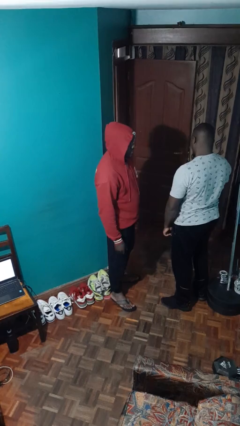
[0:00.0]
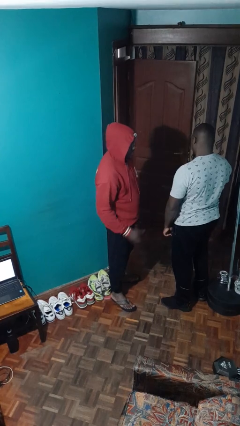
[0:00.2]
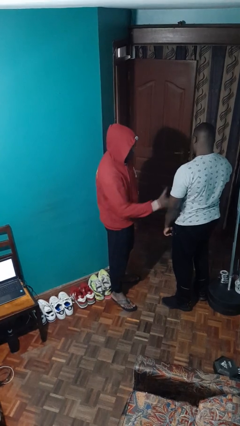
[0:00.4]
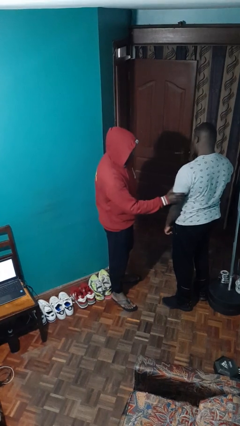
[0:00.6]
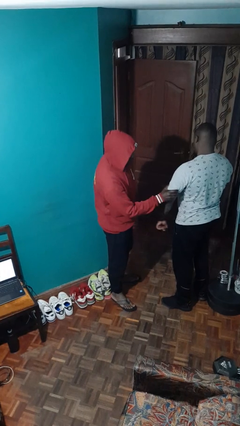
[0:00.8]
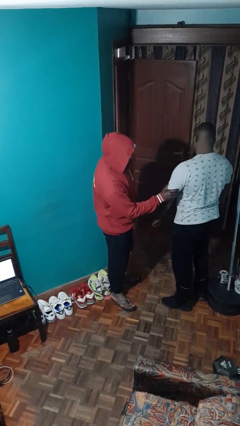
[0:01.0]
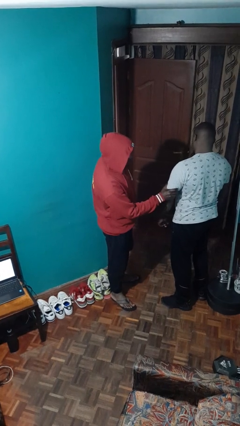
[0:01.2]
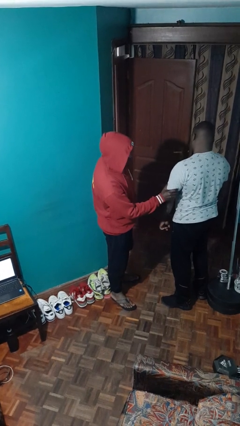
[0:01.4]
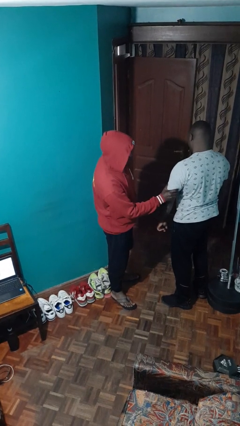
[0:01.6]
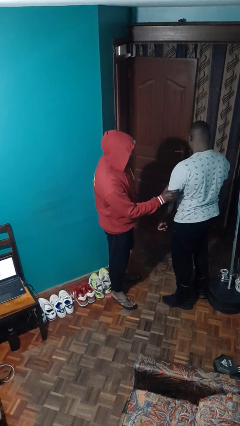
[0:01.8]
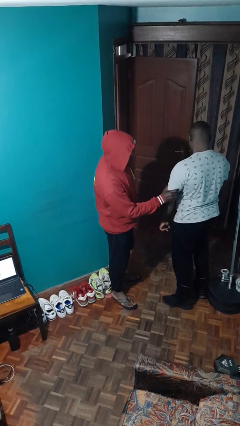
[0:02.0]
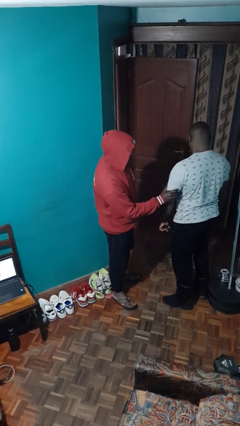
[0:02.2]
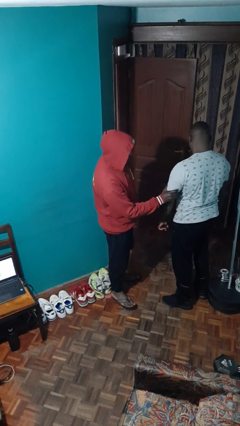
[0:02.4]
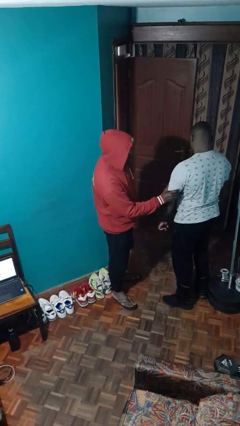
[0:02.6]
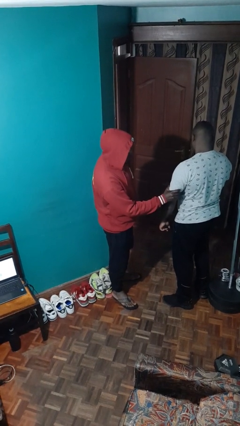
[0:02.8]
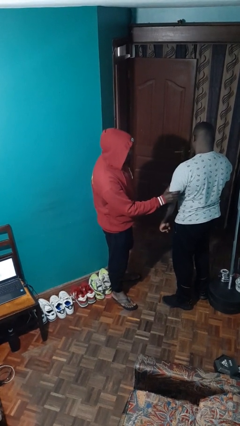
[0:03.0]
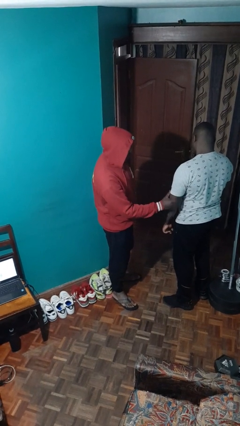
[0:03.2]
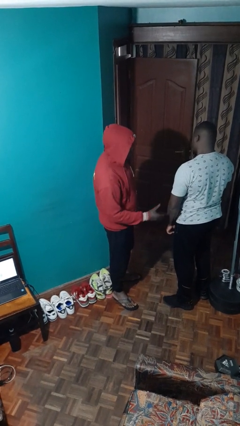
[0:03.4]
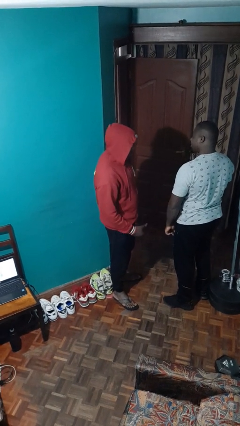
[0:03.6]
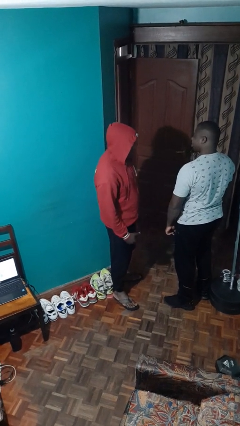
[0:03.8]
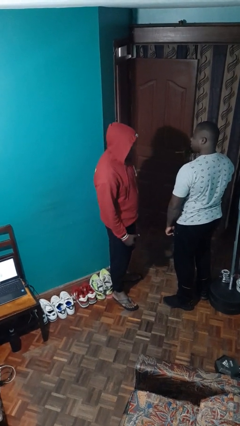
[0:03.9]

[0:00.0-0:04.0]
person grabs person by bicep

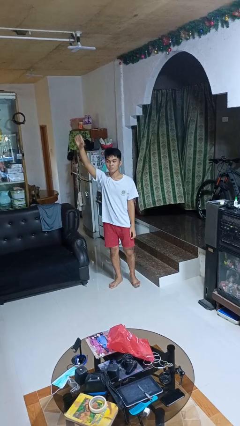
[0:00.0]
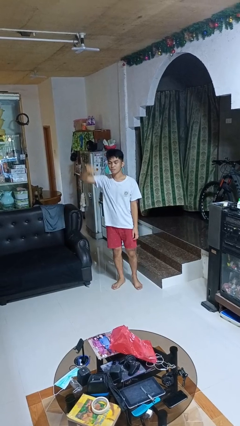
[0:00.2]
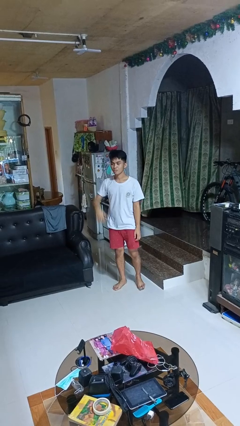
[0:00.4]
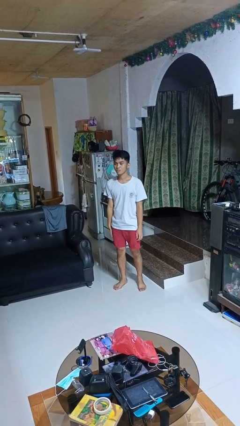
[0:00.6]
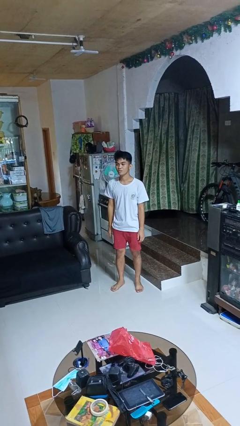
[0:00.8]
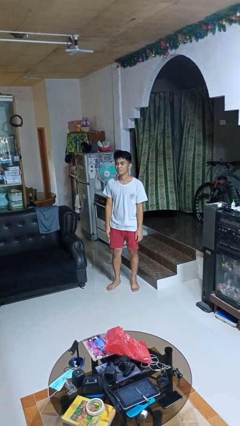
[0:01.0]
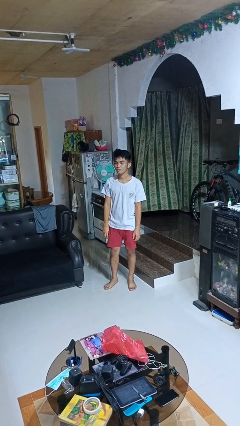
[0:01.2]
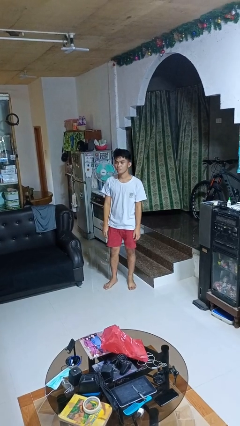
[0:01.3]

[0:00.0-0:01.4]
person gestures lower hand

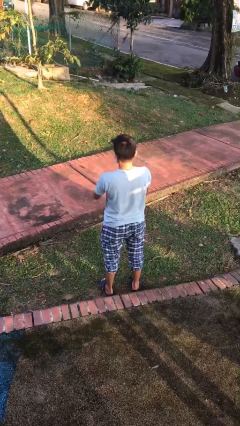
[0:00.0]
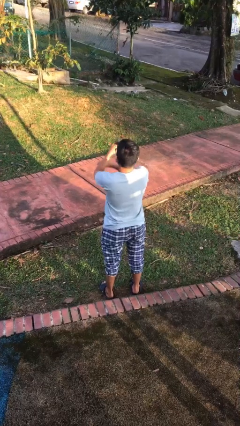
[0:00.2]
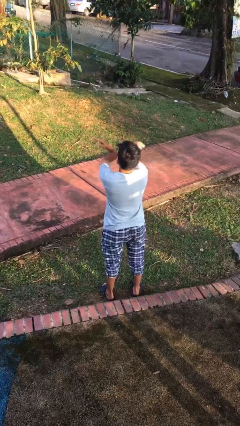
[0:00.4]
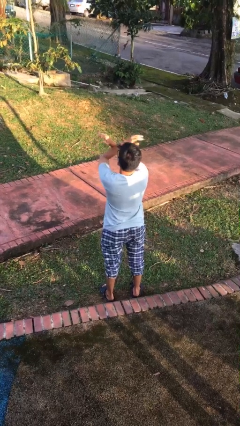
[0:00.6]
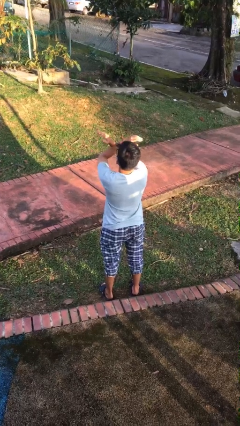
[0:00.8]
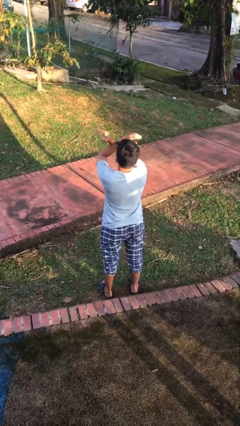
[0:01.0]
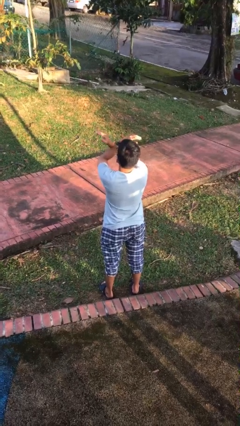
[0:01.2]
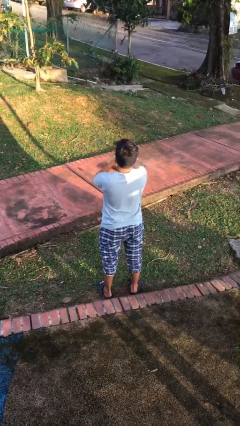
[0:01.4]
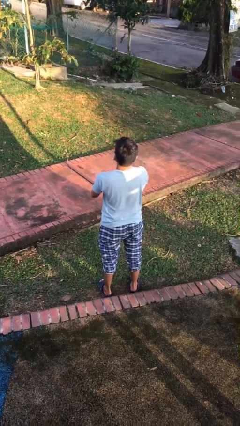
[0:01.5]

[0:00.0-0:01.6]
person gestures arms x

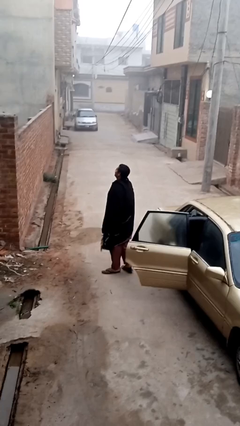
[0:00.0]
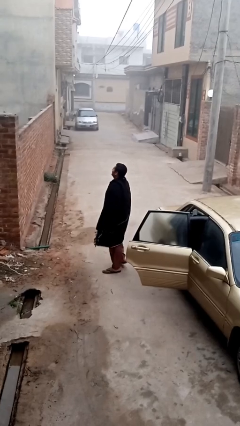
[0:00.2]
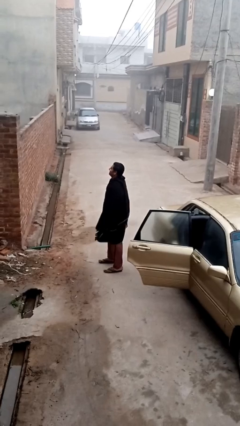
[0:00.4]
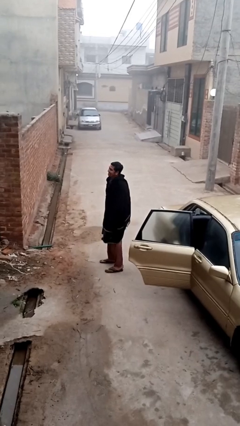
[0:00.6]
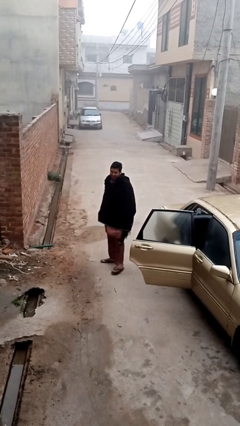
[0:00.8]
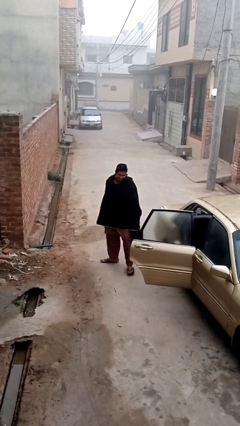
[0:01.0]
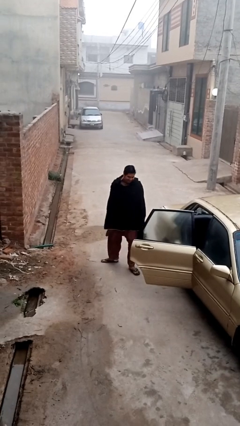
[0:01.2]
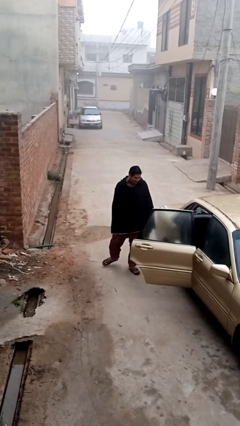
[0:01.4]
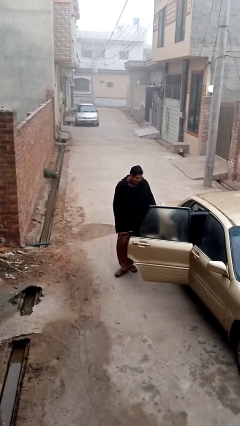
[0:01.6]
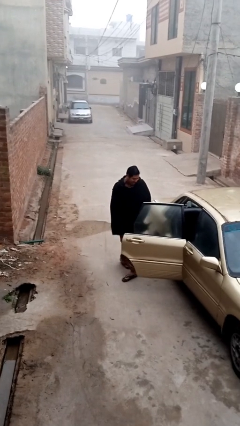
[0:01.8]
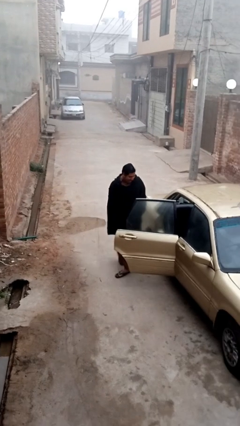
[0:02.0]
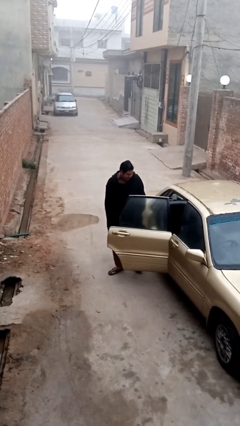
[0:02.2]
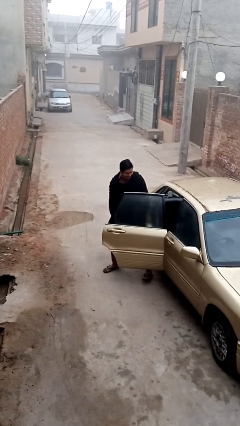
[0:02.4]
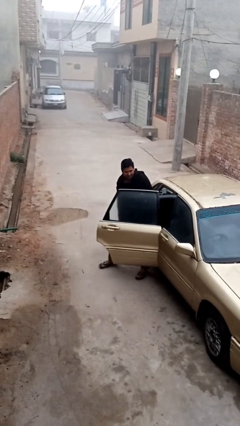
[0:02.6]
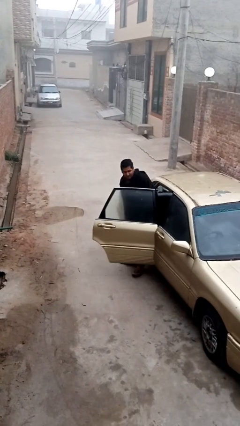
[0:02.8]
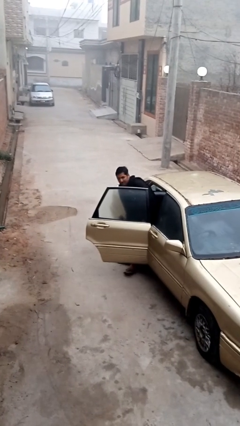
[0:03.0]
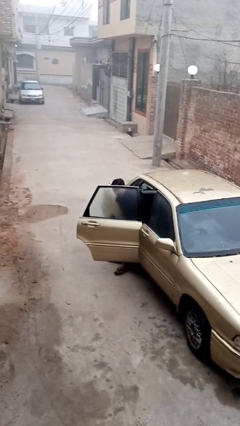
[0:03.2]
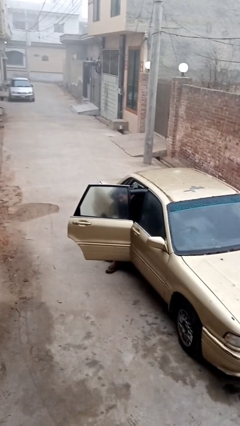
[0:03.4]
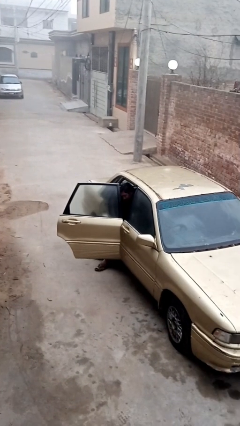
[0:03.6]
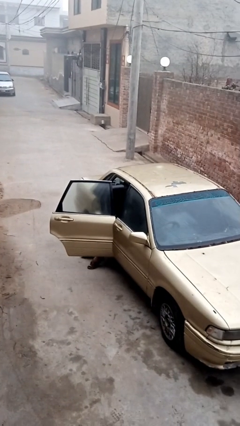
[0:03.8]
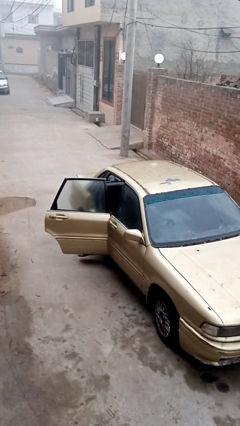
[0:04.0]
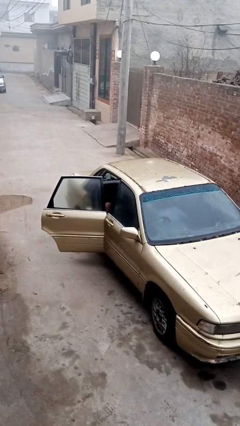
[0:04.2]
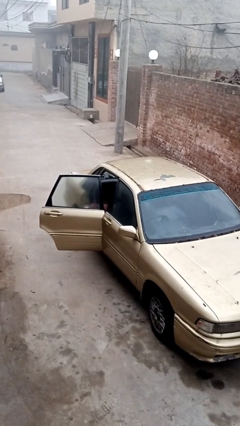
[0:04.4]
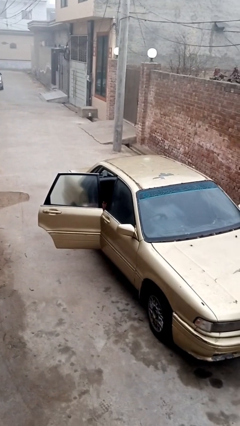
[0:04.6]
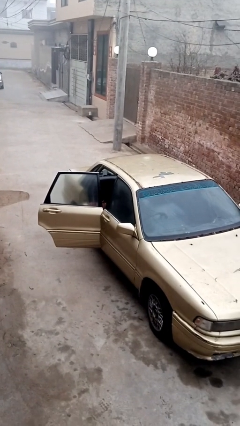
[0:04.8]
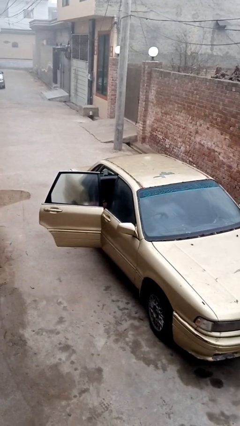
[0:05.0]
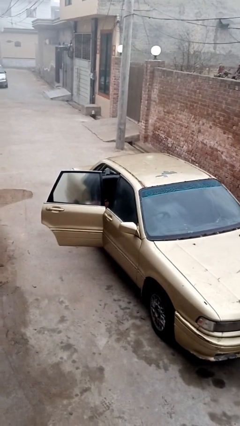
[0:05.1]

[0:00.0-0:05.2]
person enters car

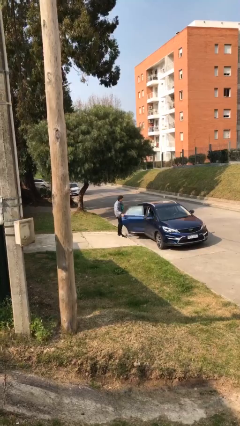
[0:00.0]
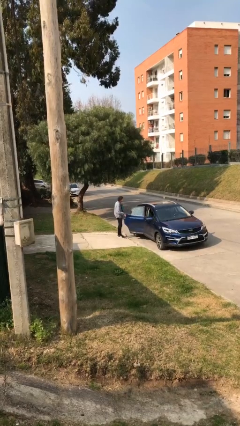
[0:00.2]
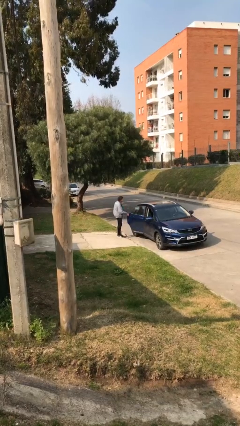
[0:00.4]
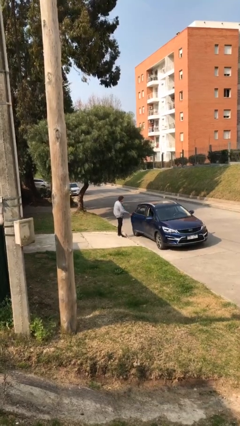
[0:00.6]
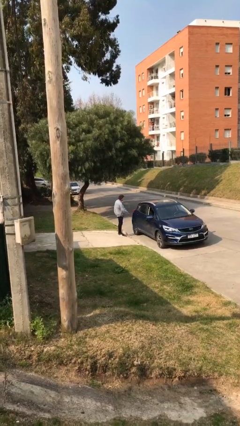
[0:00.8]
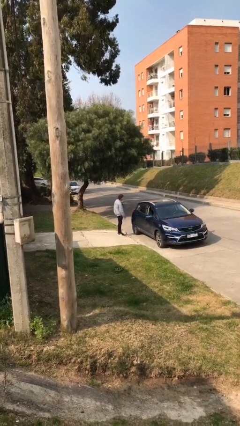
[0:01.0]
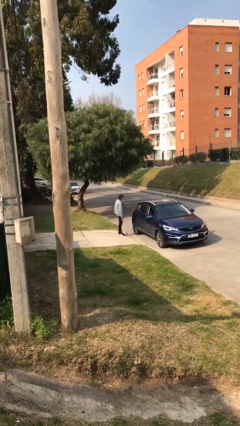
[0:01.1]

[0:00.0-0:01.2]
person closes car door

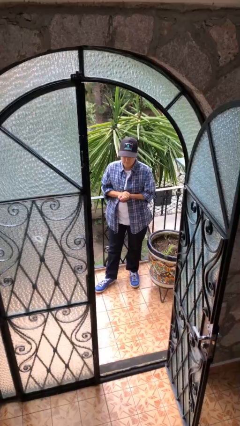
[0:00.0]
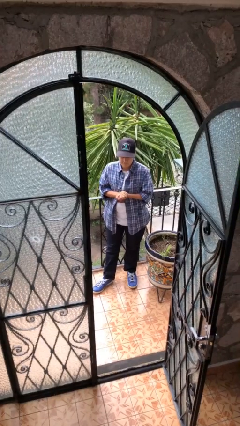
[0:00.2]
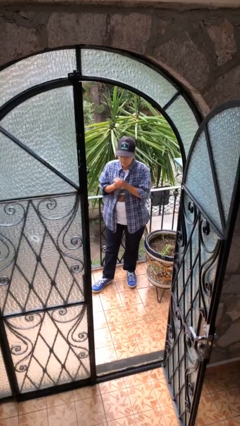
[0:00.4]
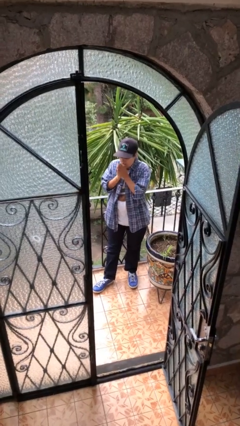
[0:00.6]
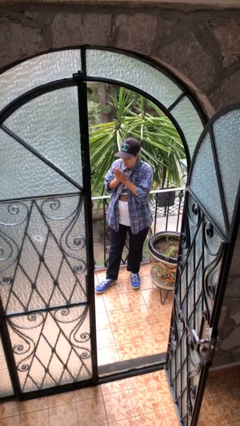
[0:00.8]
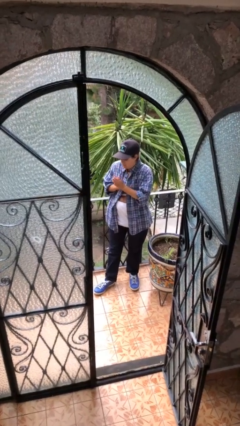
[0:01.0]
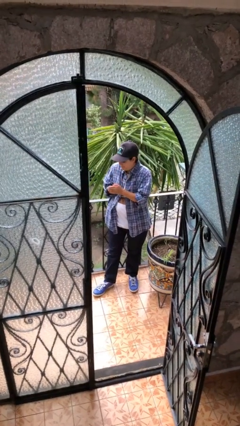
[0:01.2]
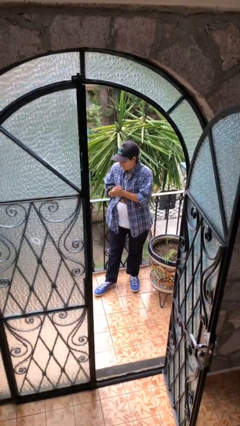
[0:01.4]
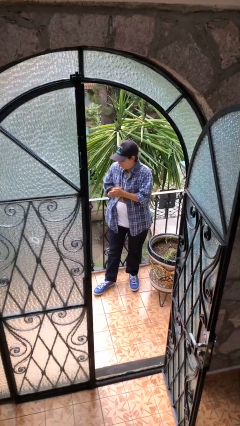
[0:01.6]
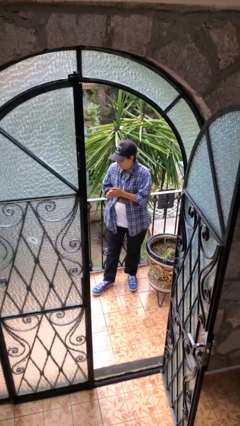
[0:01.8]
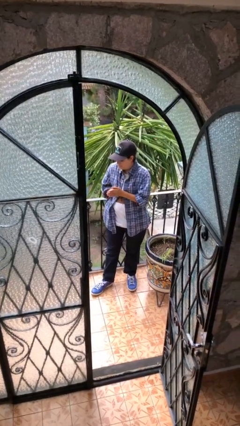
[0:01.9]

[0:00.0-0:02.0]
person blows into hands

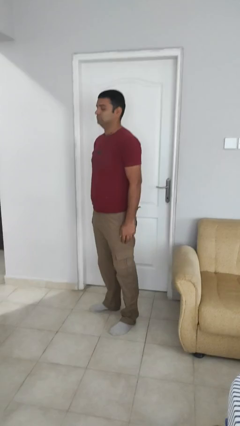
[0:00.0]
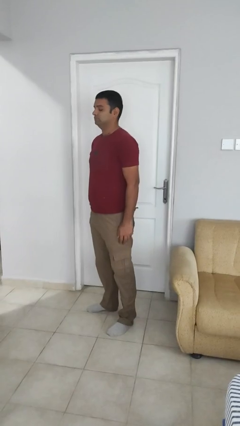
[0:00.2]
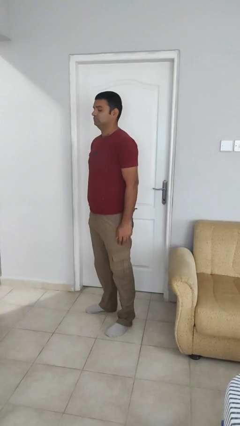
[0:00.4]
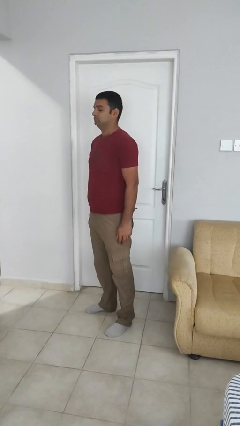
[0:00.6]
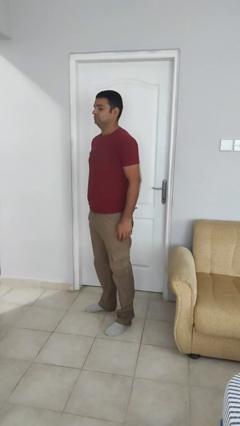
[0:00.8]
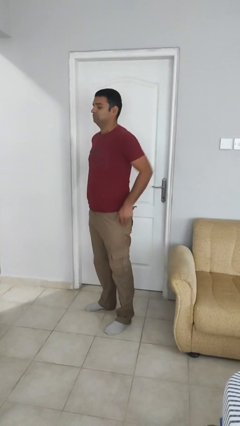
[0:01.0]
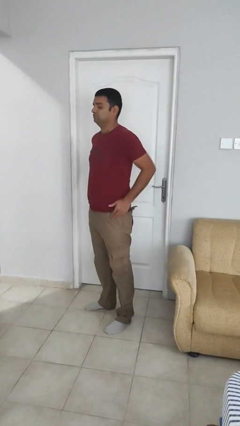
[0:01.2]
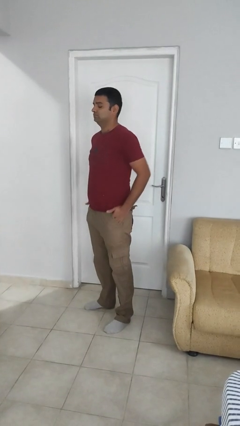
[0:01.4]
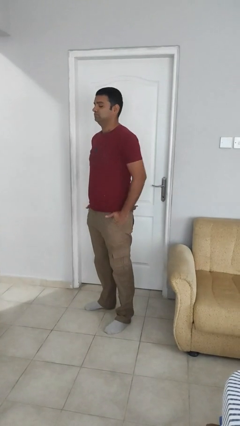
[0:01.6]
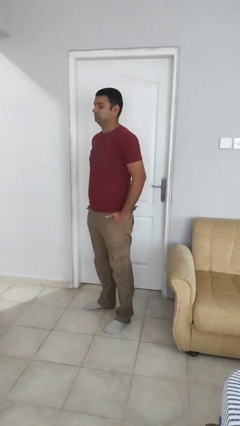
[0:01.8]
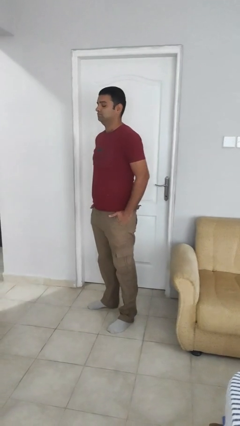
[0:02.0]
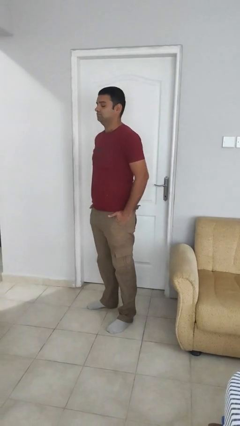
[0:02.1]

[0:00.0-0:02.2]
person puts hands in back pockets
